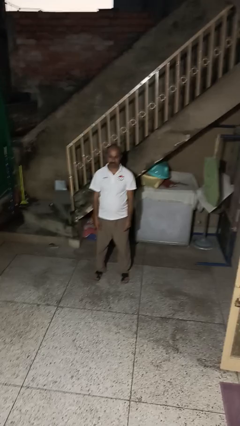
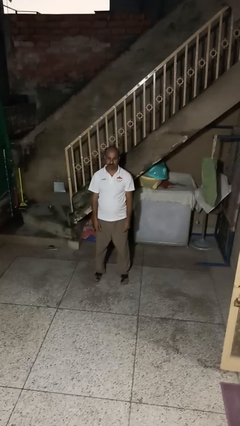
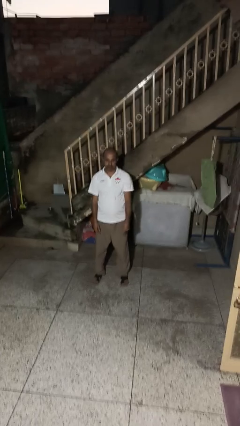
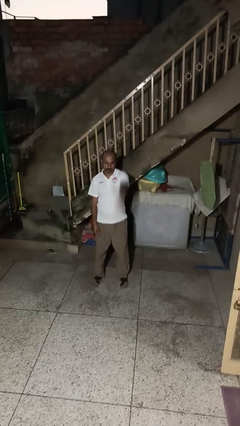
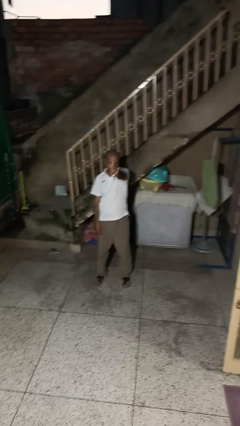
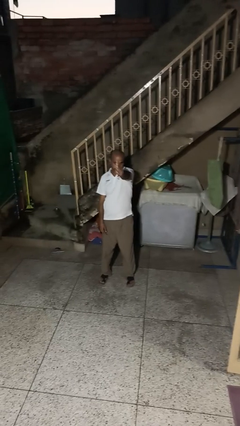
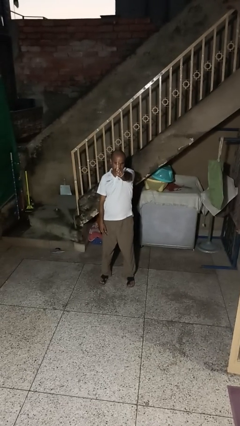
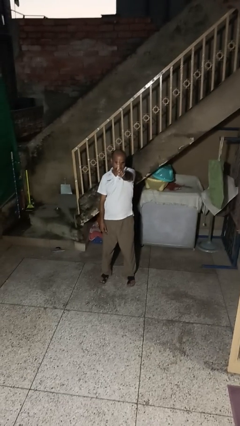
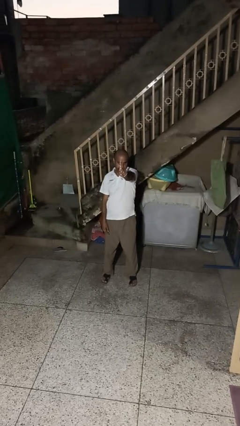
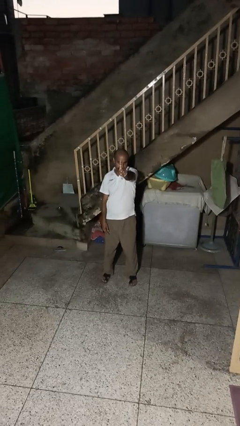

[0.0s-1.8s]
person gestures number one

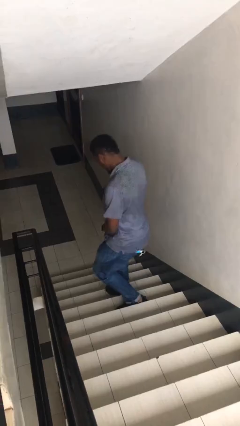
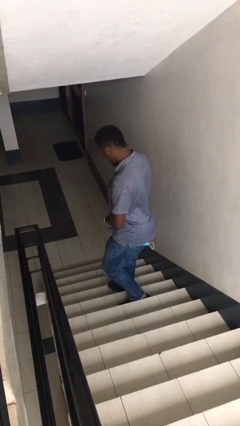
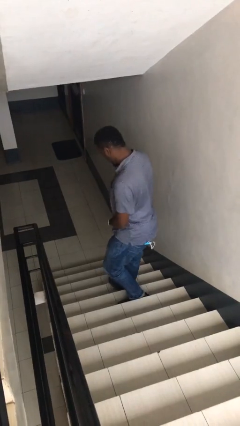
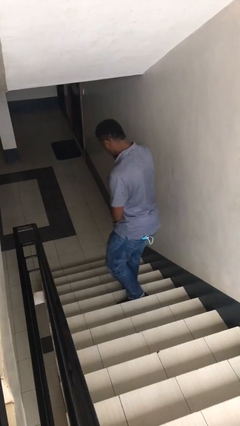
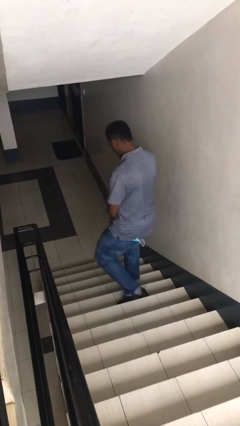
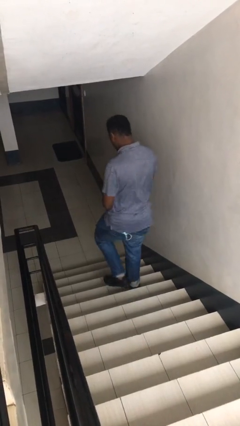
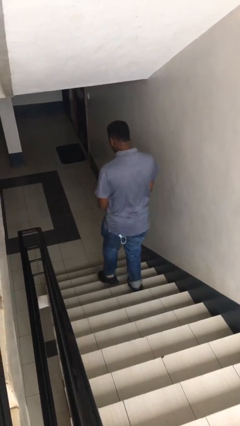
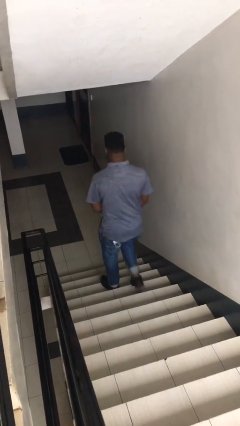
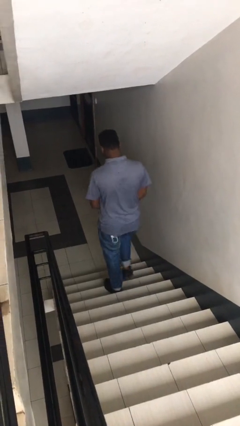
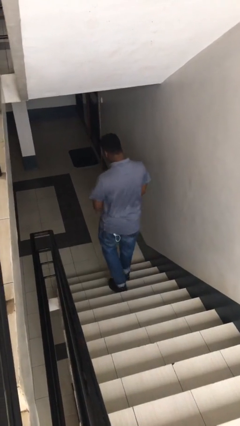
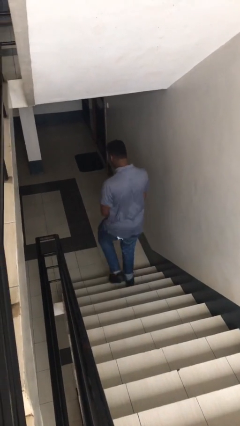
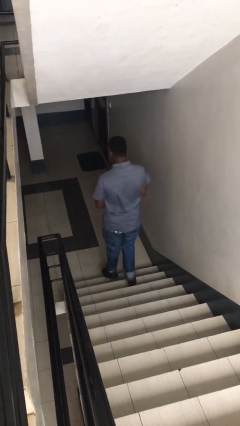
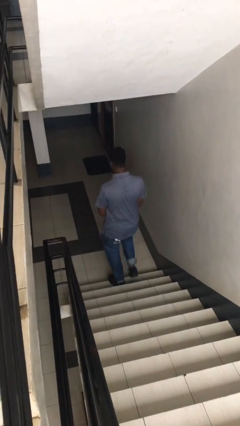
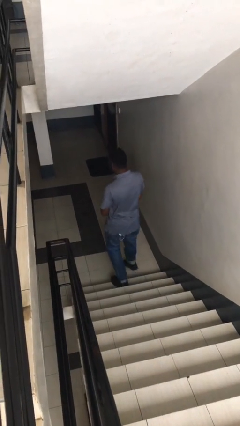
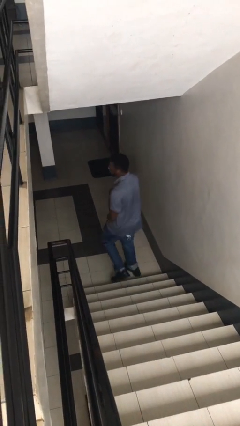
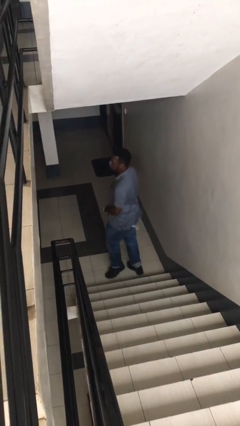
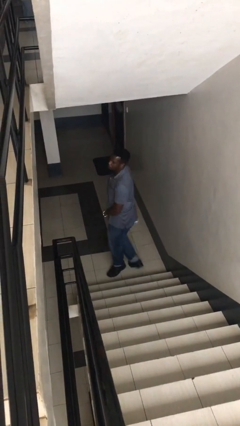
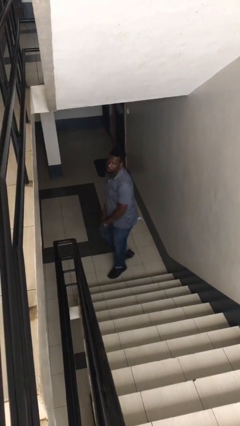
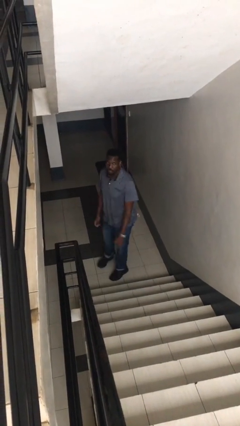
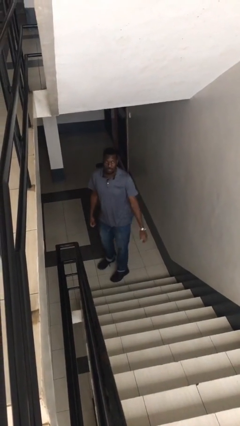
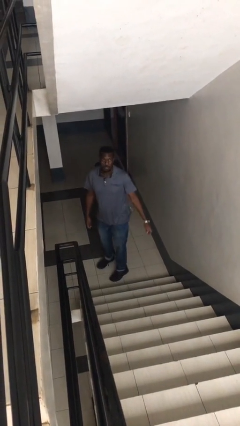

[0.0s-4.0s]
person climbs down stairs

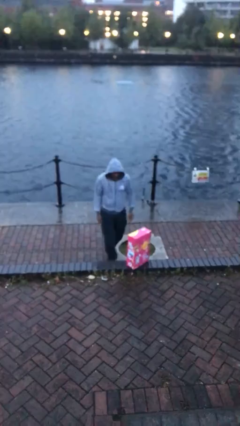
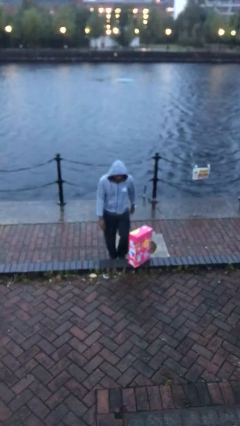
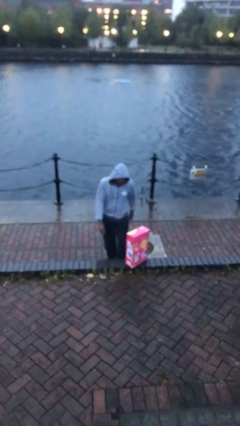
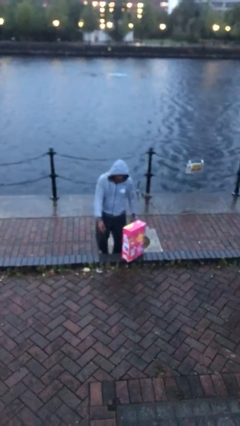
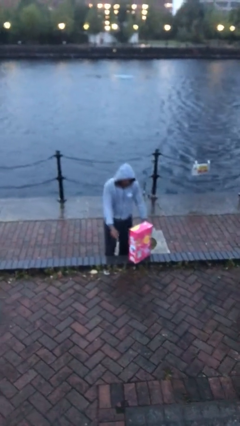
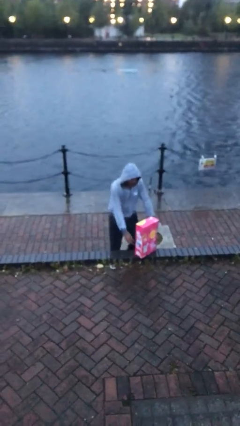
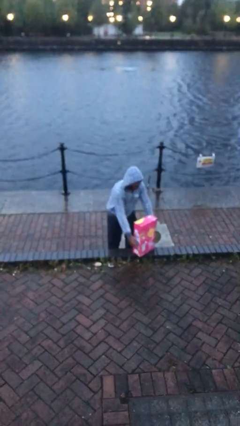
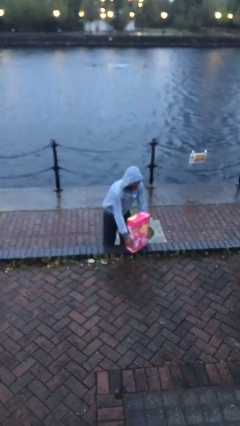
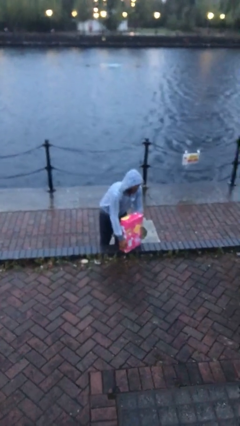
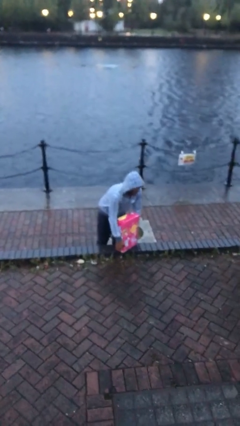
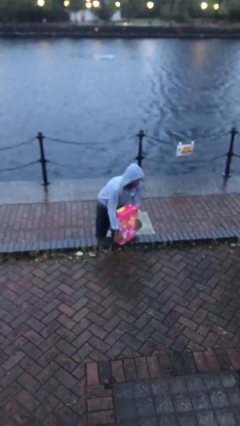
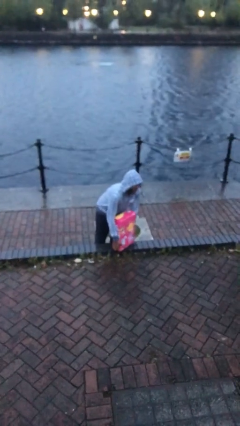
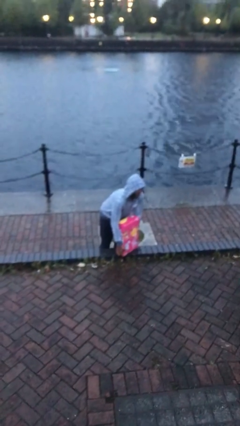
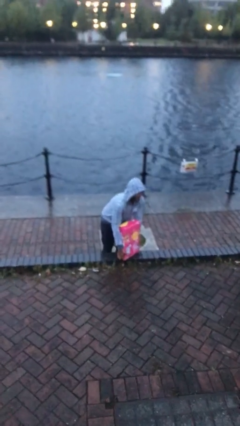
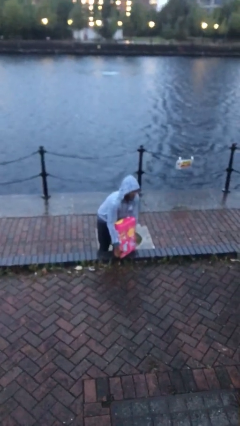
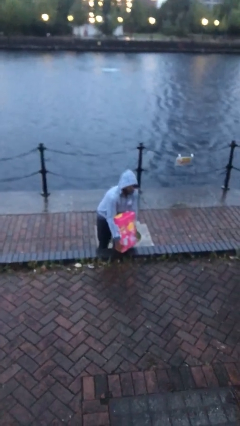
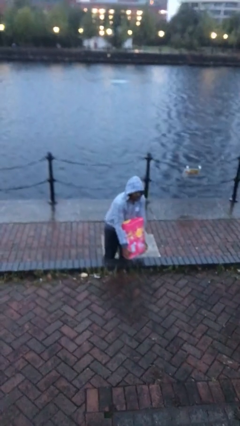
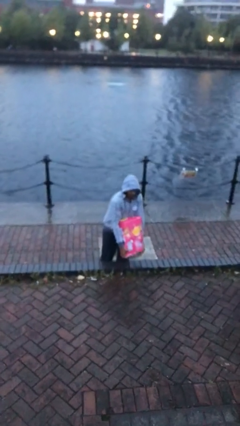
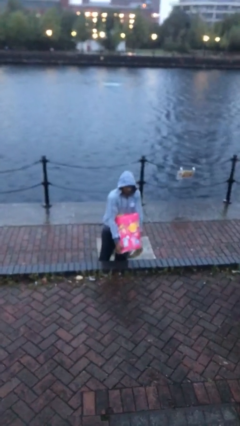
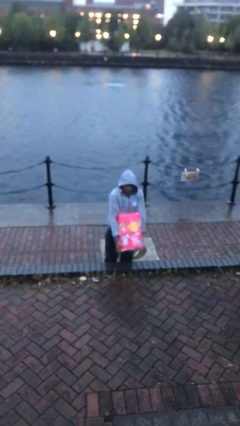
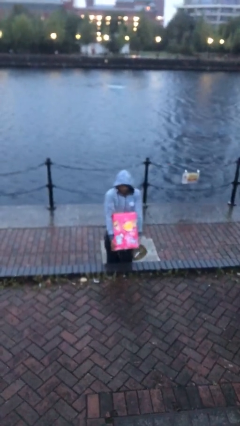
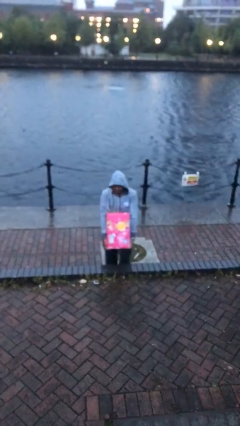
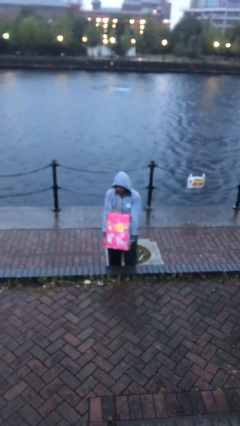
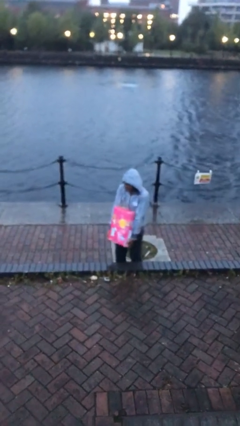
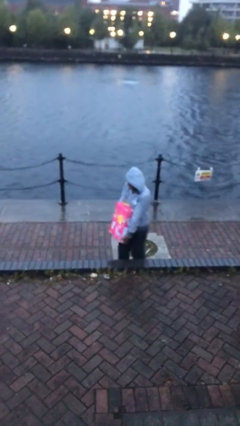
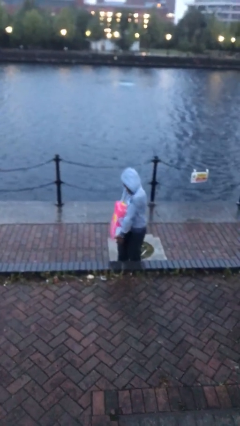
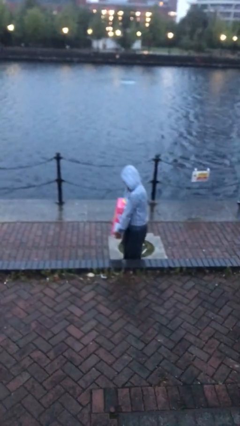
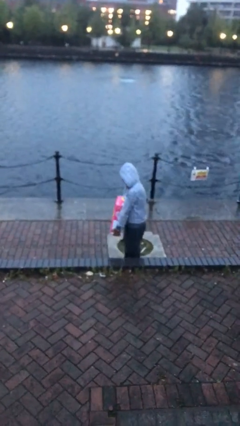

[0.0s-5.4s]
person picks up object from floor

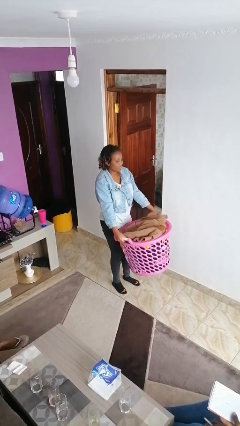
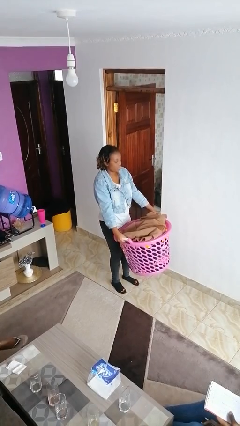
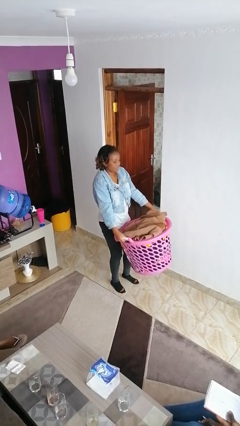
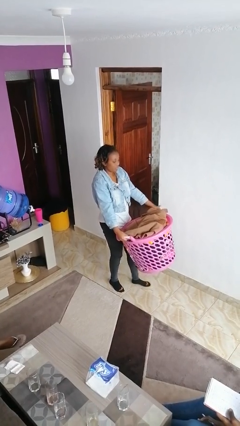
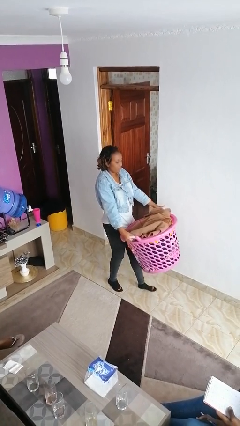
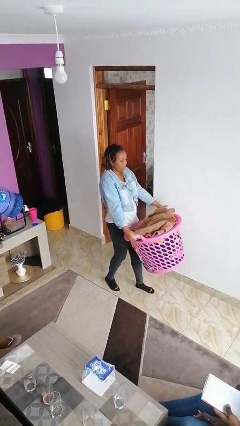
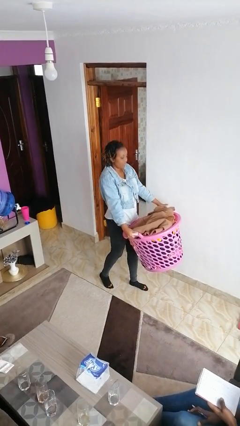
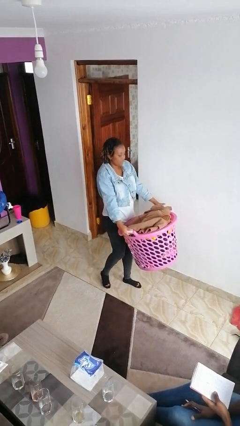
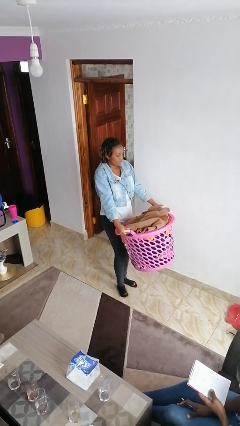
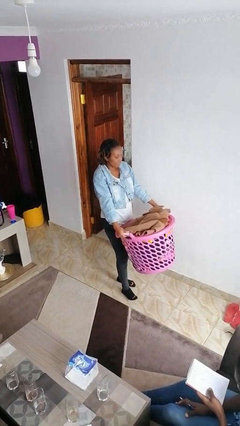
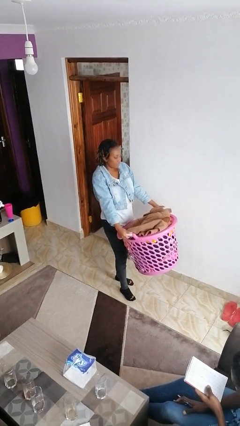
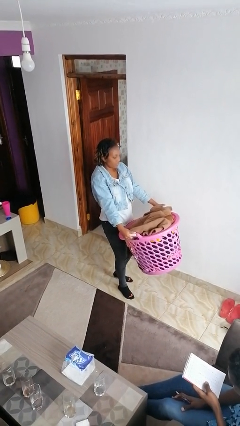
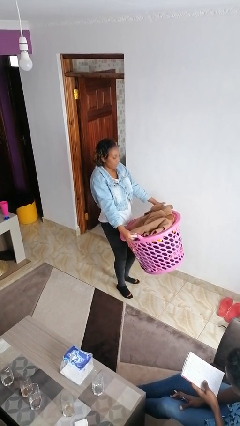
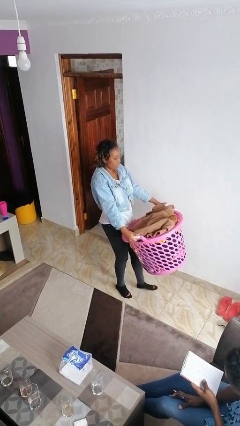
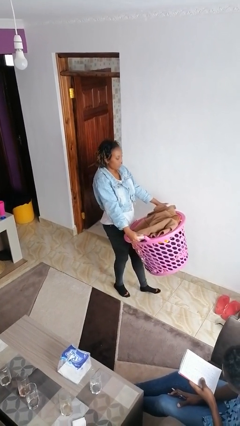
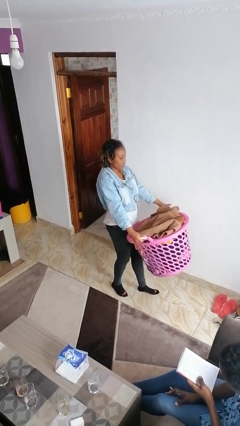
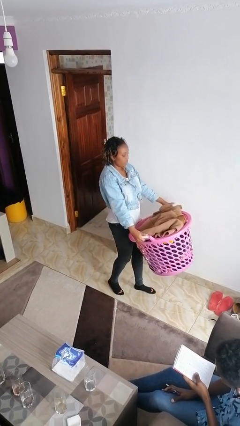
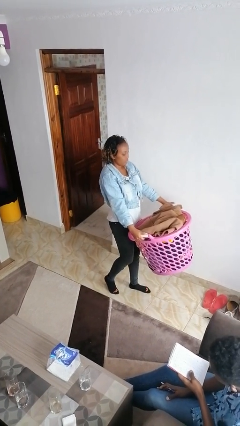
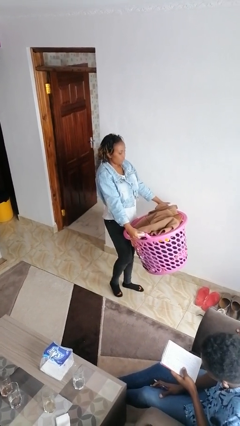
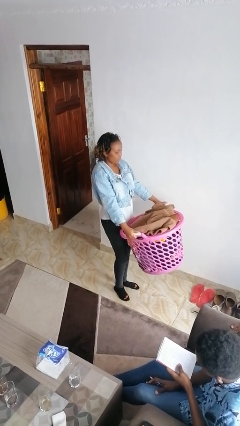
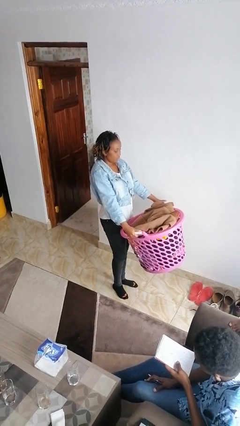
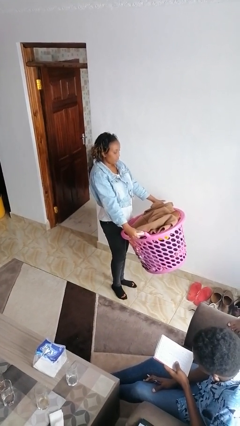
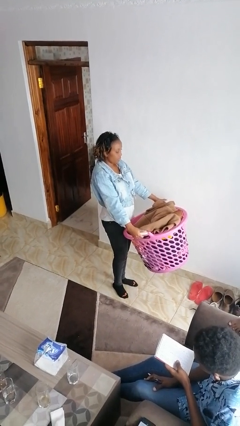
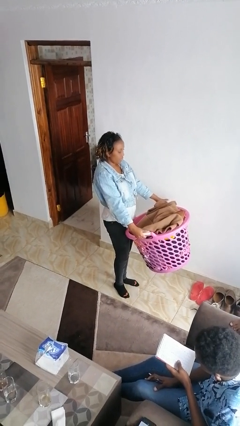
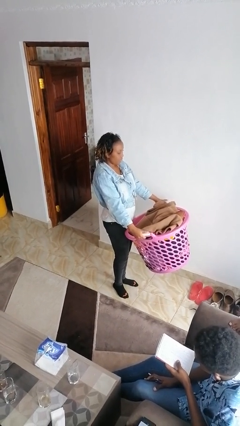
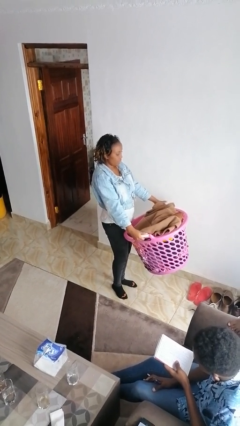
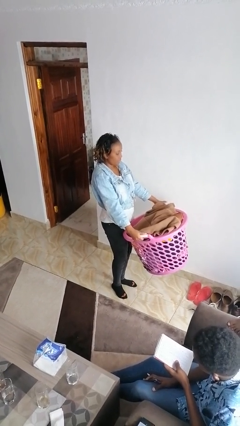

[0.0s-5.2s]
person carries laundry basket

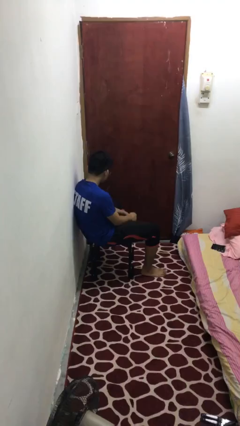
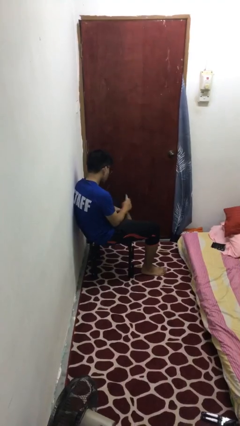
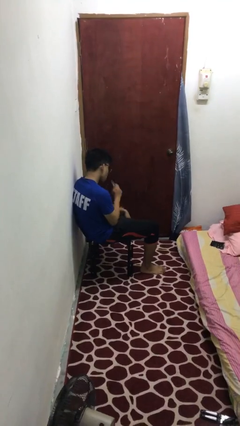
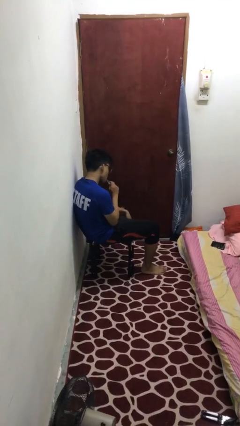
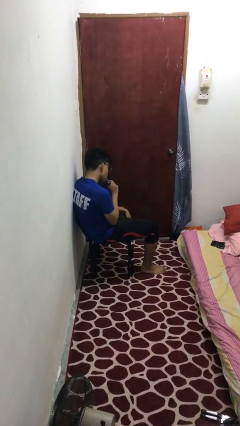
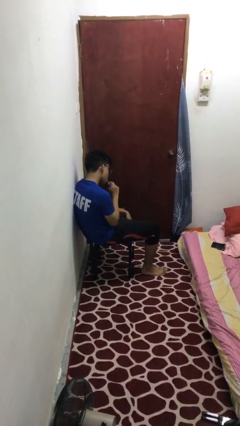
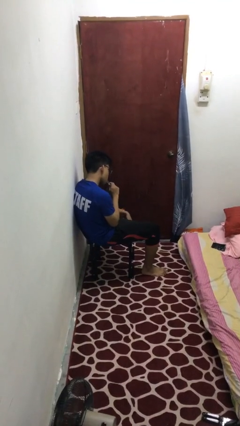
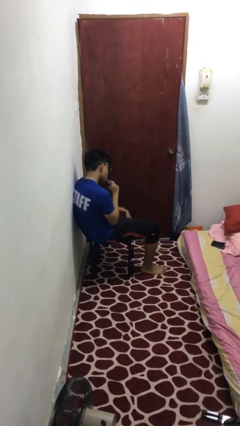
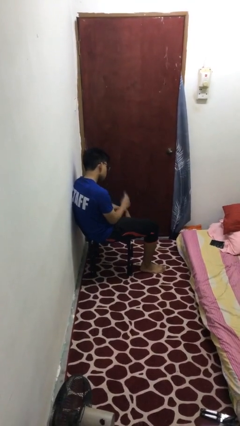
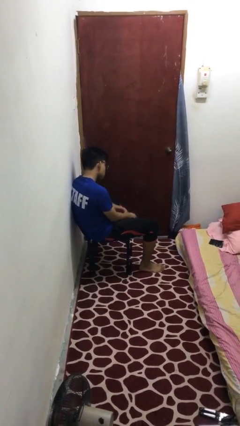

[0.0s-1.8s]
person vapes
